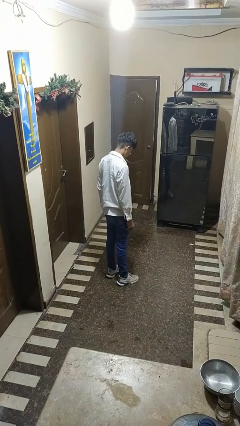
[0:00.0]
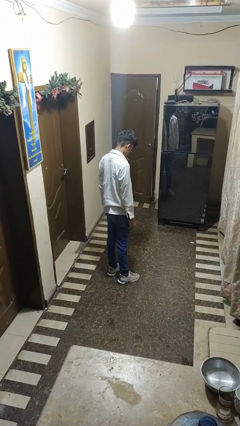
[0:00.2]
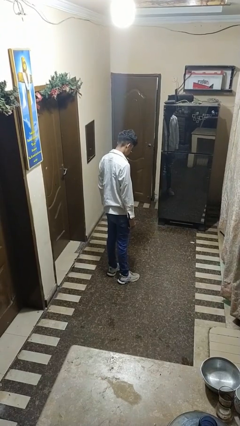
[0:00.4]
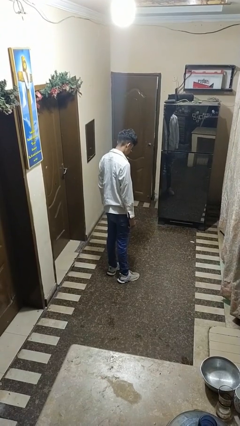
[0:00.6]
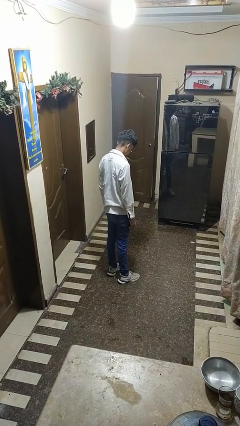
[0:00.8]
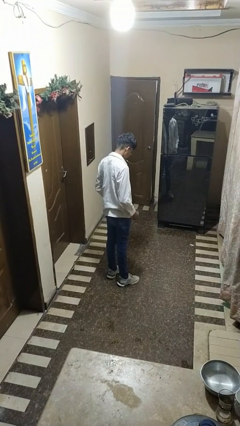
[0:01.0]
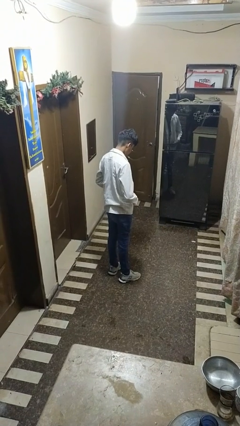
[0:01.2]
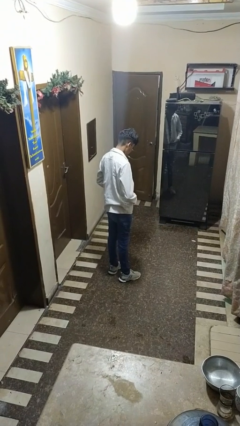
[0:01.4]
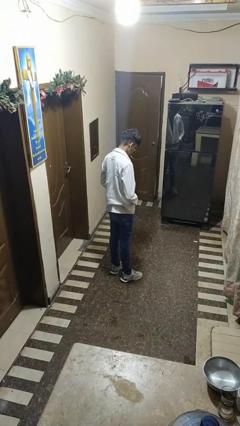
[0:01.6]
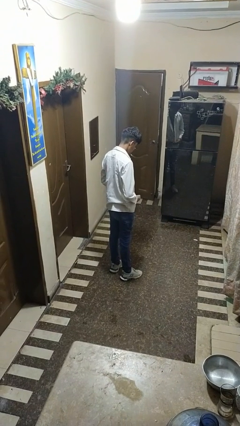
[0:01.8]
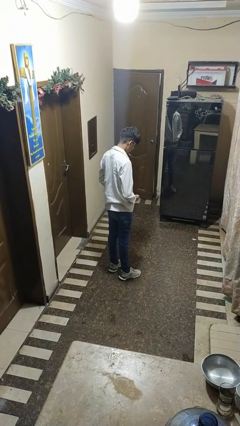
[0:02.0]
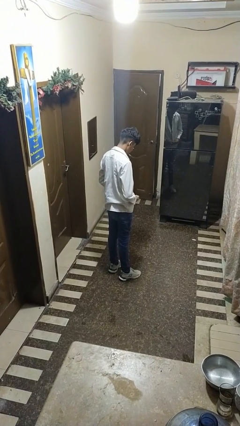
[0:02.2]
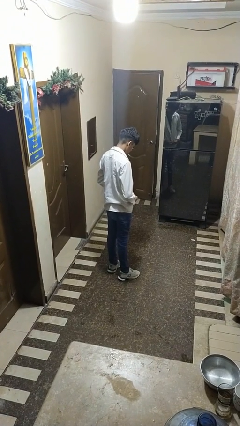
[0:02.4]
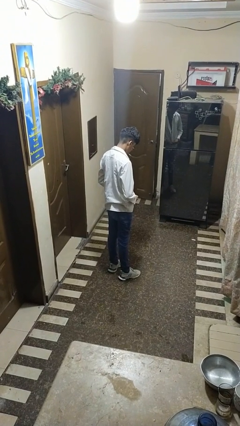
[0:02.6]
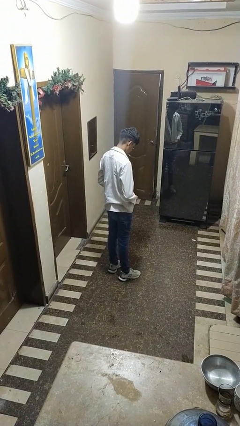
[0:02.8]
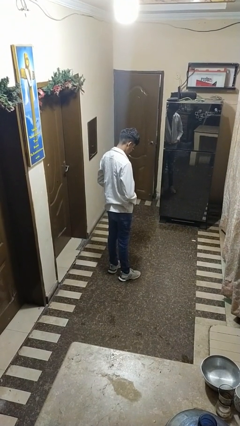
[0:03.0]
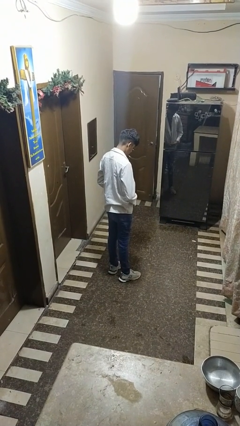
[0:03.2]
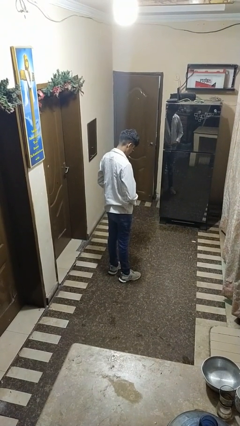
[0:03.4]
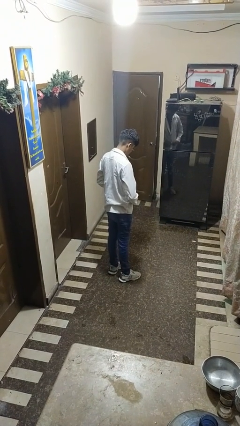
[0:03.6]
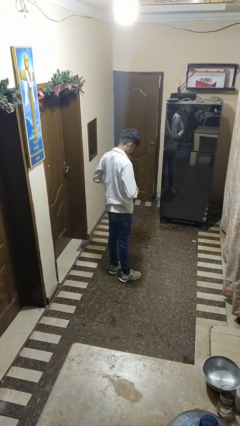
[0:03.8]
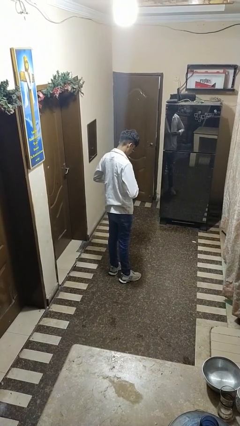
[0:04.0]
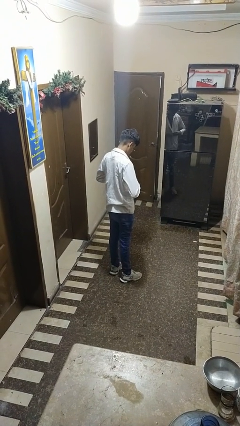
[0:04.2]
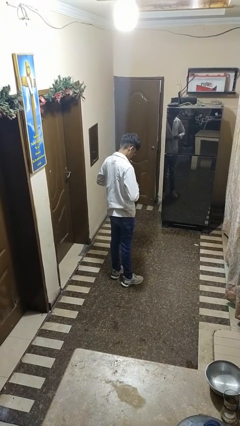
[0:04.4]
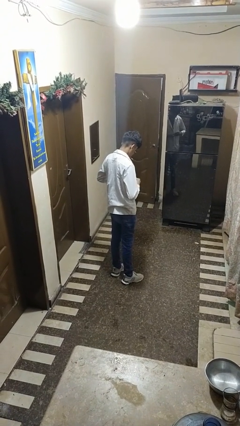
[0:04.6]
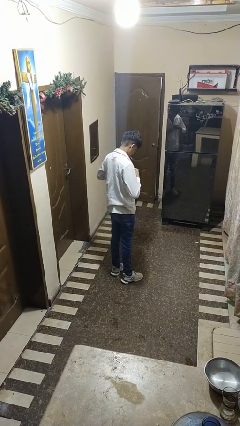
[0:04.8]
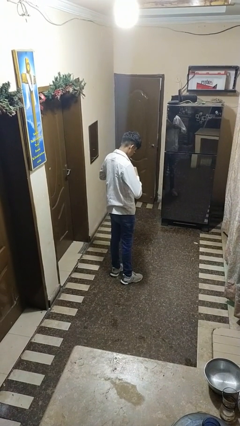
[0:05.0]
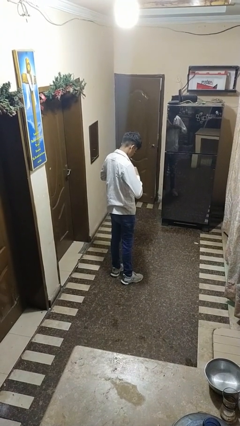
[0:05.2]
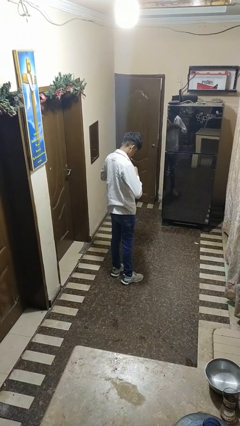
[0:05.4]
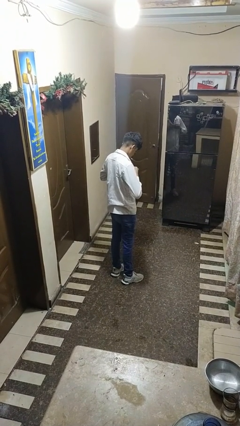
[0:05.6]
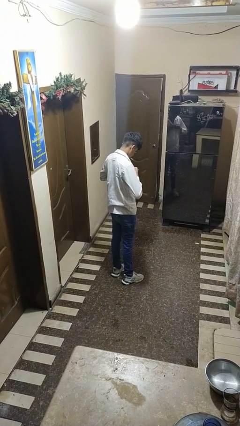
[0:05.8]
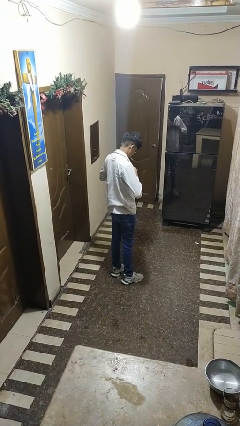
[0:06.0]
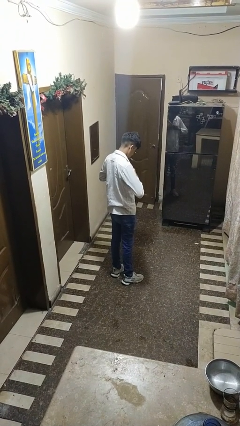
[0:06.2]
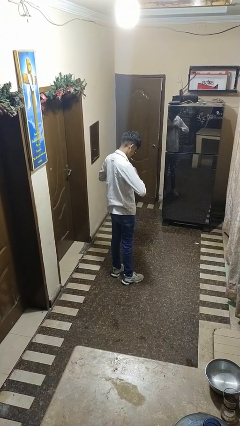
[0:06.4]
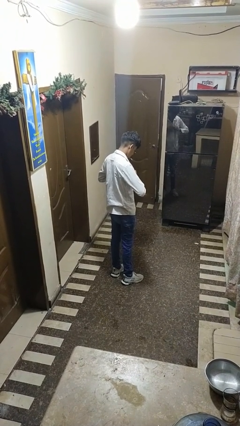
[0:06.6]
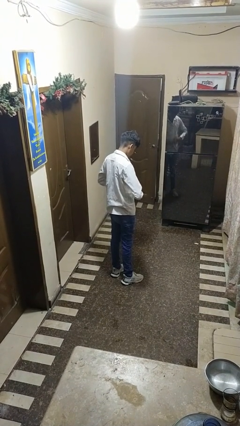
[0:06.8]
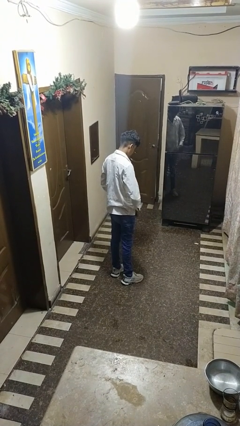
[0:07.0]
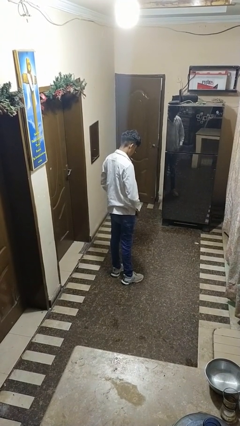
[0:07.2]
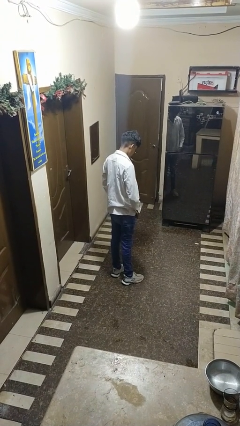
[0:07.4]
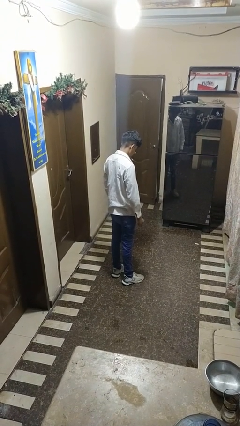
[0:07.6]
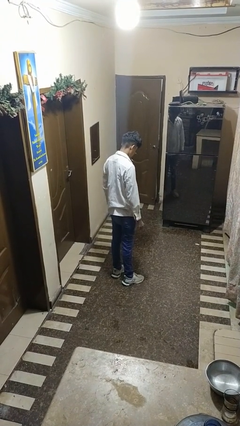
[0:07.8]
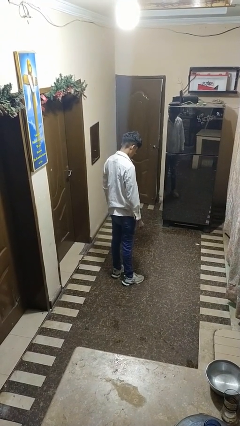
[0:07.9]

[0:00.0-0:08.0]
person buttons shirt

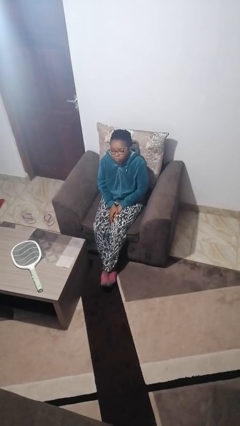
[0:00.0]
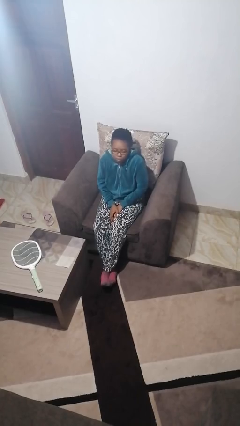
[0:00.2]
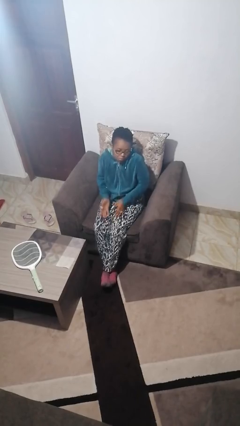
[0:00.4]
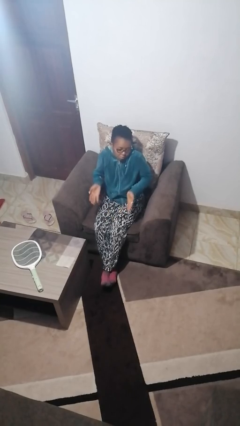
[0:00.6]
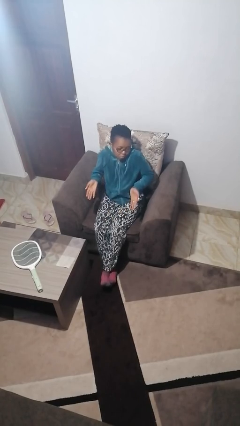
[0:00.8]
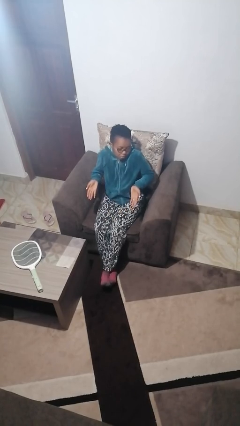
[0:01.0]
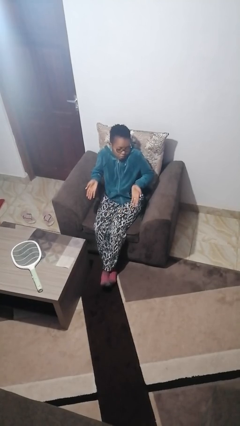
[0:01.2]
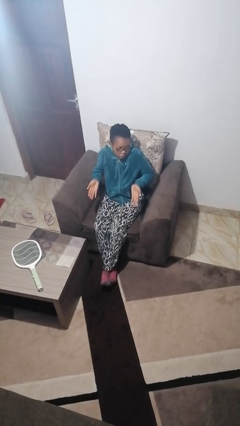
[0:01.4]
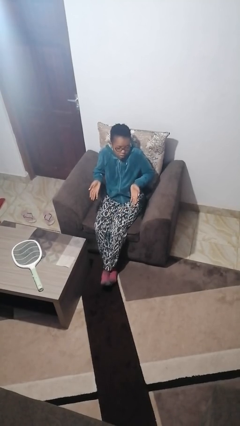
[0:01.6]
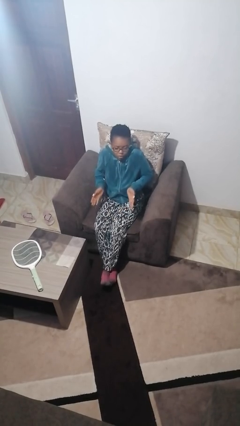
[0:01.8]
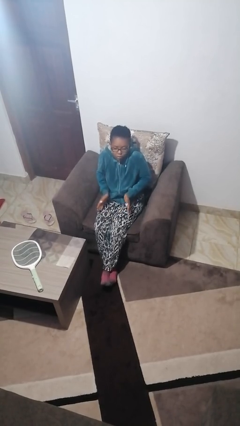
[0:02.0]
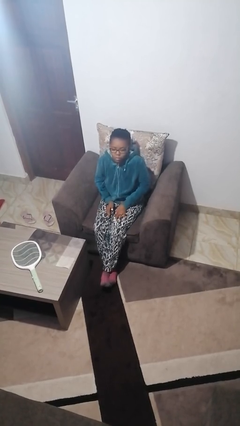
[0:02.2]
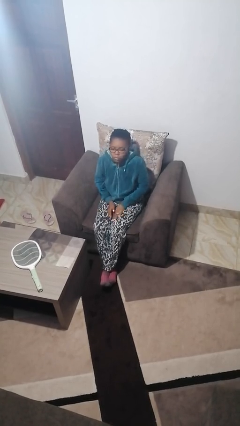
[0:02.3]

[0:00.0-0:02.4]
person shrugs

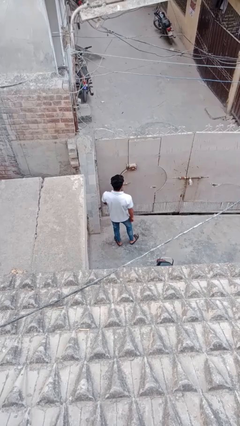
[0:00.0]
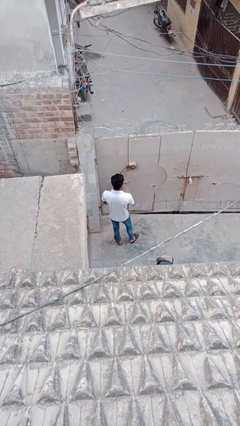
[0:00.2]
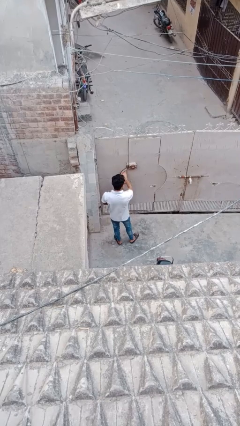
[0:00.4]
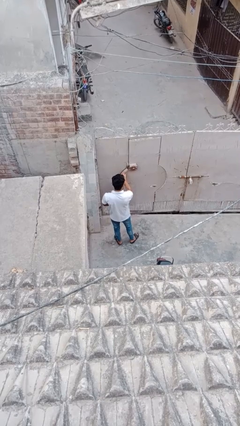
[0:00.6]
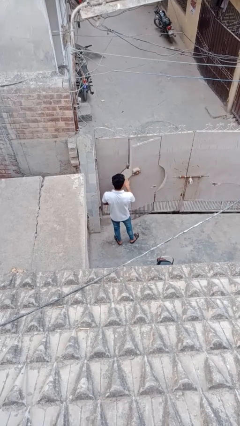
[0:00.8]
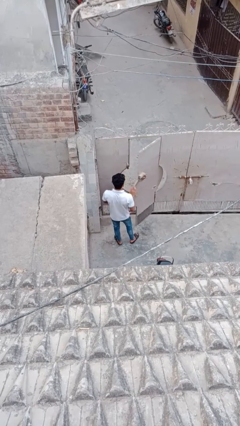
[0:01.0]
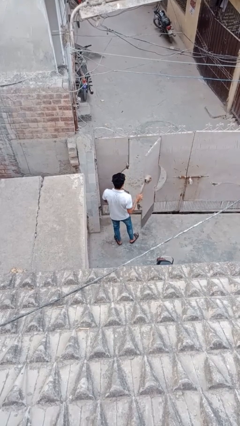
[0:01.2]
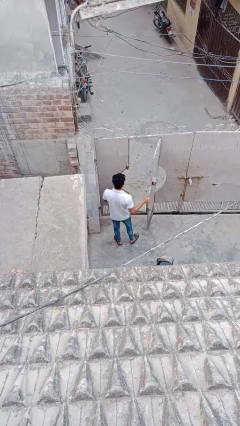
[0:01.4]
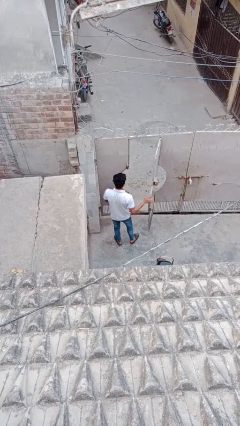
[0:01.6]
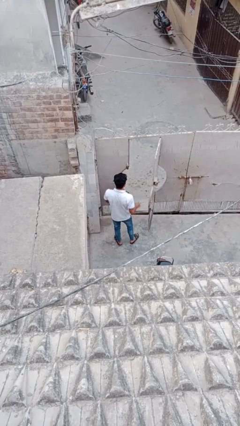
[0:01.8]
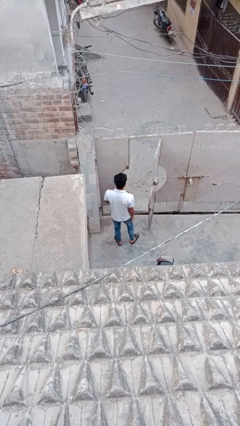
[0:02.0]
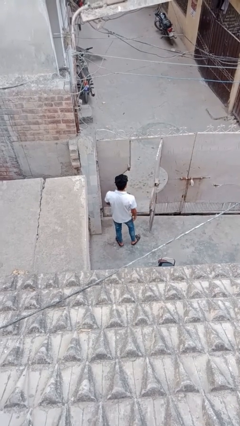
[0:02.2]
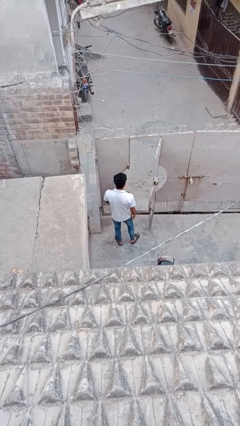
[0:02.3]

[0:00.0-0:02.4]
person opens facility door

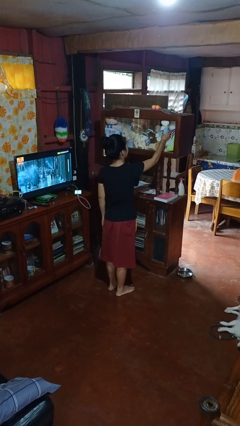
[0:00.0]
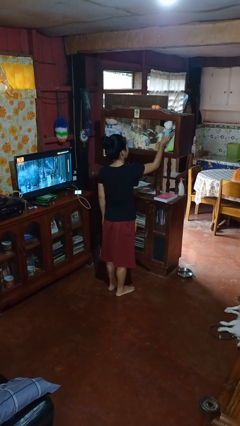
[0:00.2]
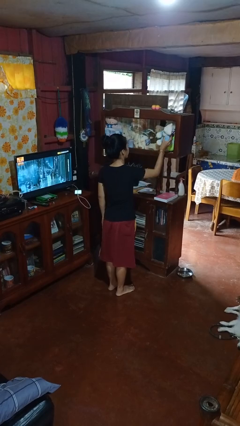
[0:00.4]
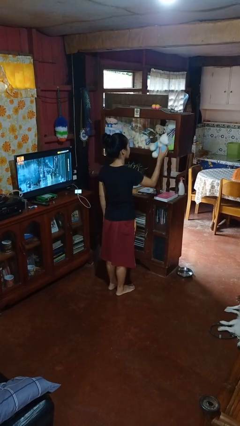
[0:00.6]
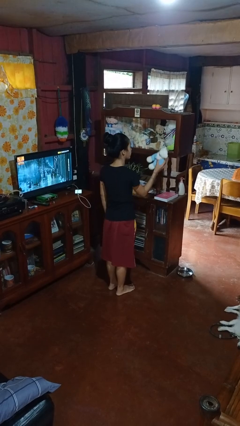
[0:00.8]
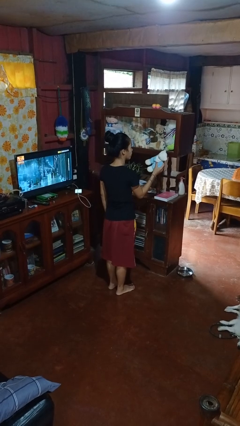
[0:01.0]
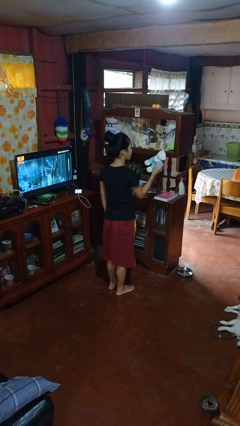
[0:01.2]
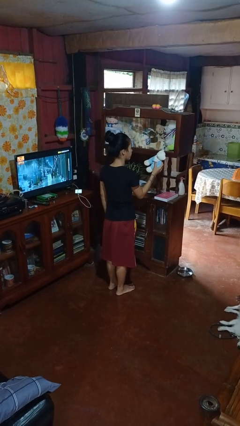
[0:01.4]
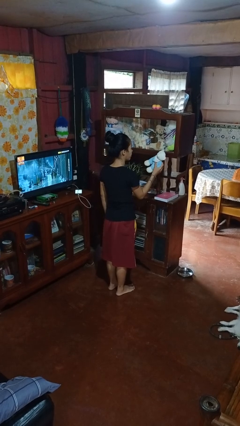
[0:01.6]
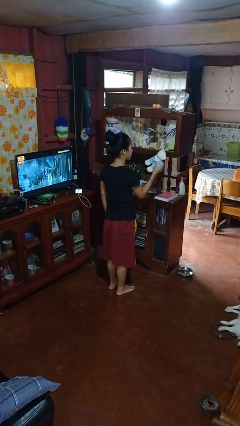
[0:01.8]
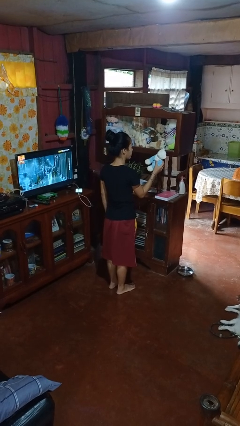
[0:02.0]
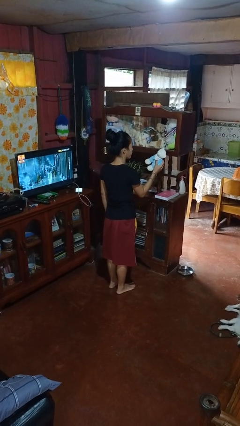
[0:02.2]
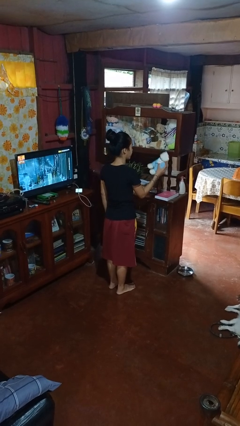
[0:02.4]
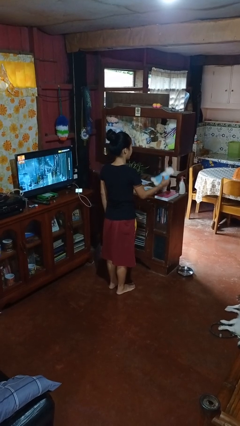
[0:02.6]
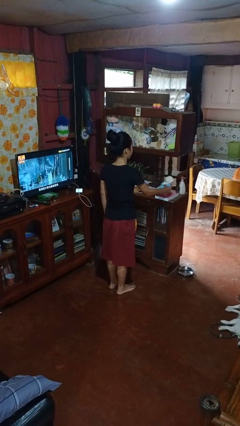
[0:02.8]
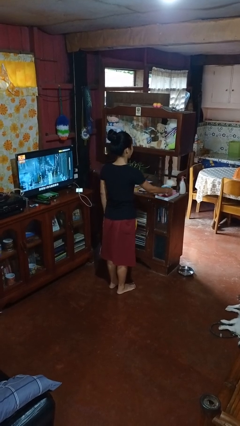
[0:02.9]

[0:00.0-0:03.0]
person picks up object from shelf

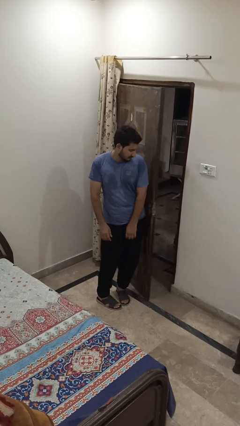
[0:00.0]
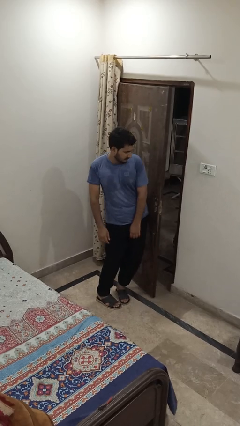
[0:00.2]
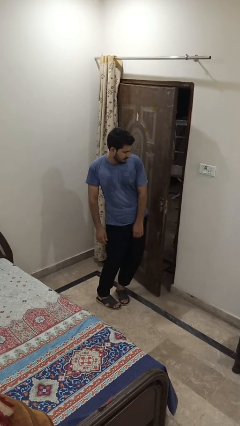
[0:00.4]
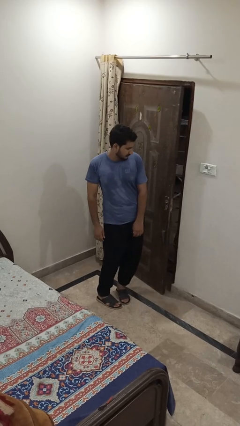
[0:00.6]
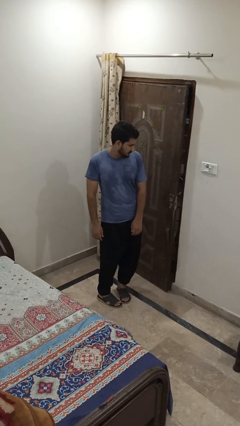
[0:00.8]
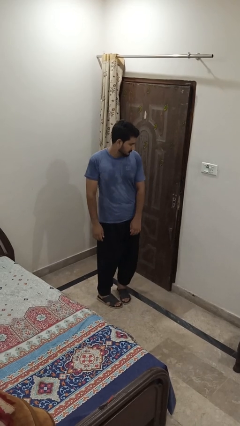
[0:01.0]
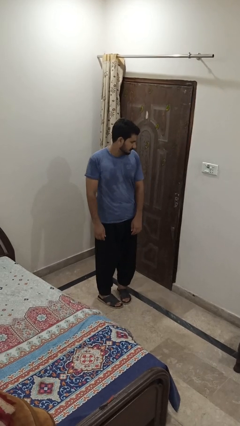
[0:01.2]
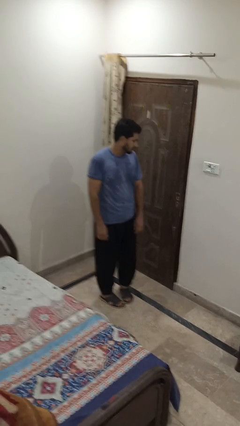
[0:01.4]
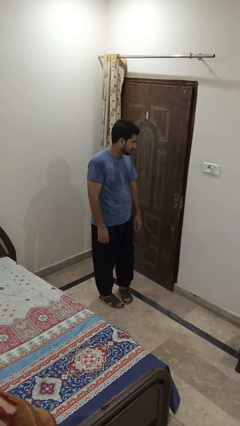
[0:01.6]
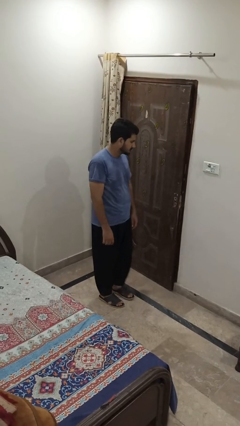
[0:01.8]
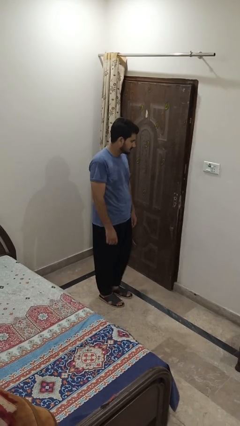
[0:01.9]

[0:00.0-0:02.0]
person closes door with hip
